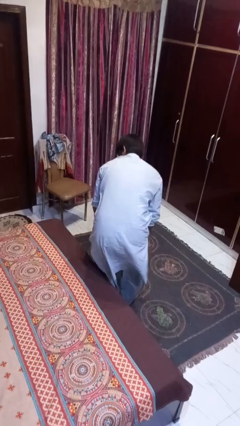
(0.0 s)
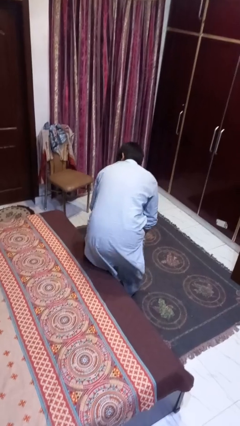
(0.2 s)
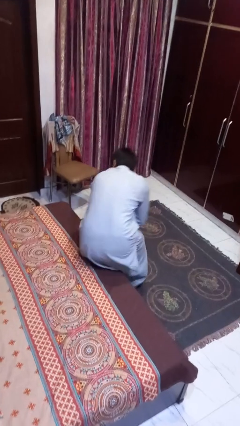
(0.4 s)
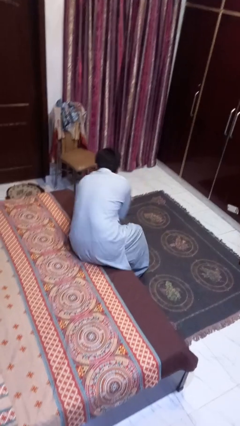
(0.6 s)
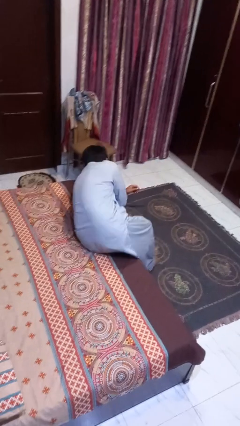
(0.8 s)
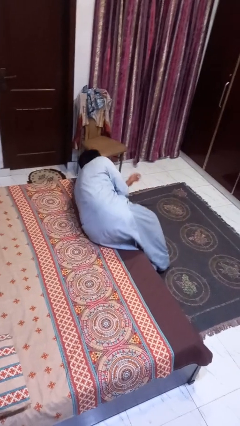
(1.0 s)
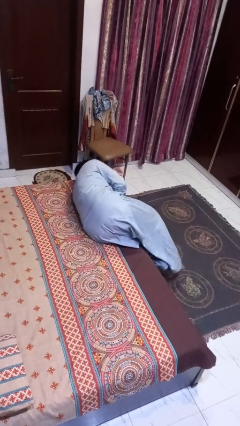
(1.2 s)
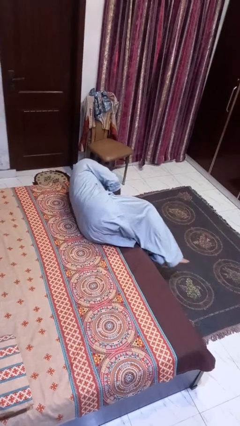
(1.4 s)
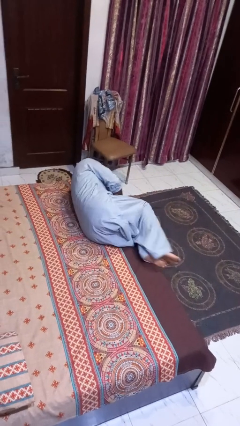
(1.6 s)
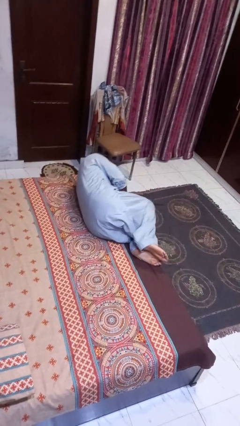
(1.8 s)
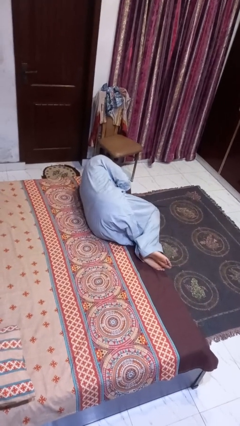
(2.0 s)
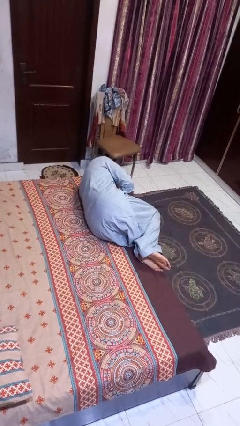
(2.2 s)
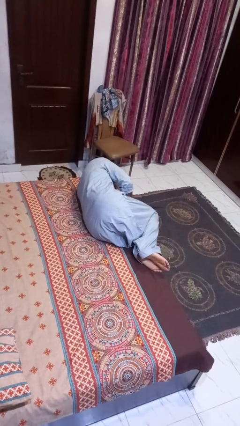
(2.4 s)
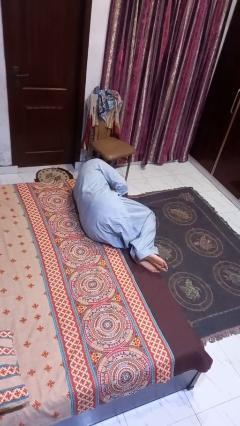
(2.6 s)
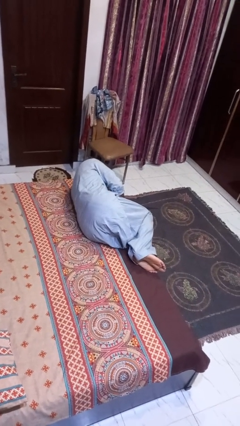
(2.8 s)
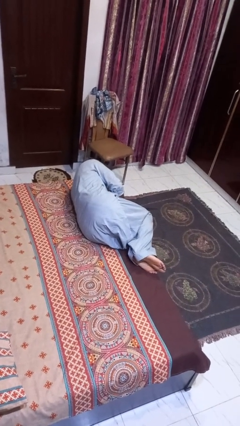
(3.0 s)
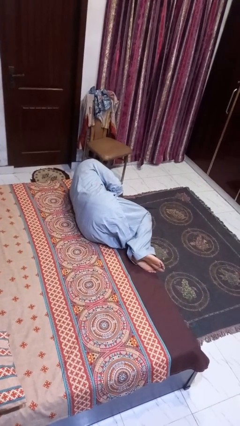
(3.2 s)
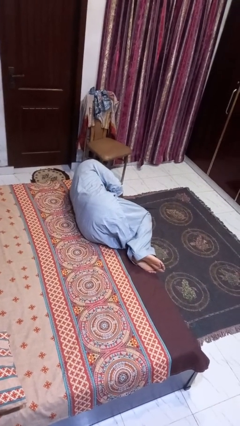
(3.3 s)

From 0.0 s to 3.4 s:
person lies down on bed

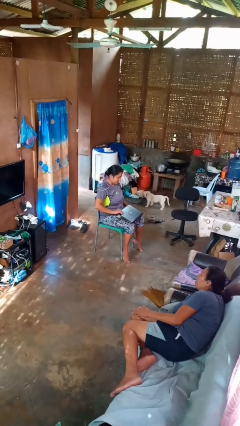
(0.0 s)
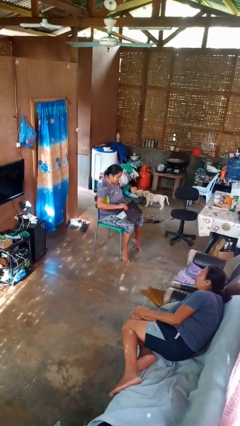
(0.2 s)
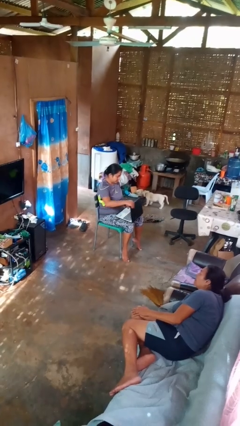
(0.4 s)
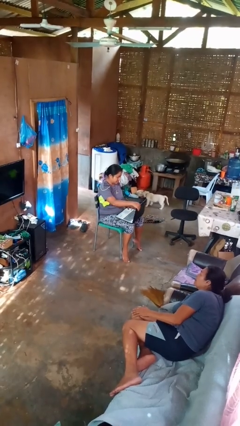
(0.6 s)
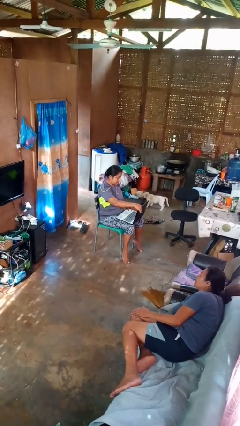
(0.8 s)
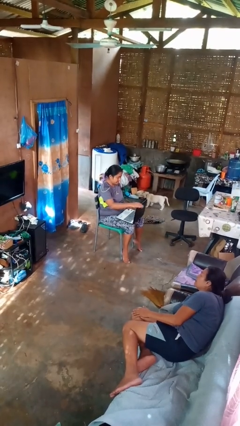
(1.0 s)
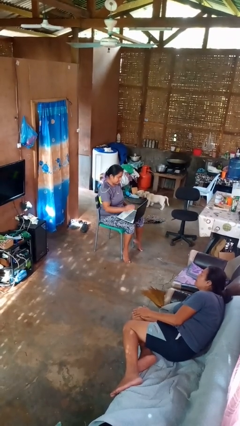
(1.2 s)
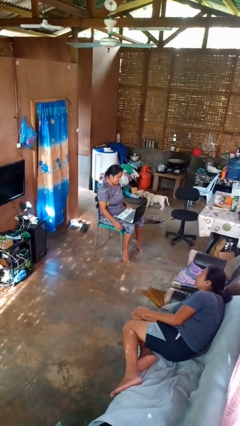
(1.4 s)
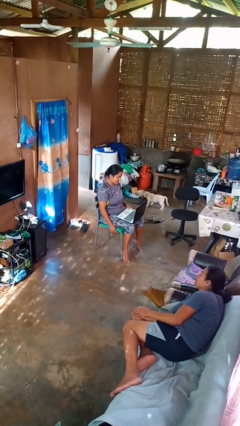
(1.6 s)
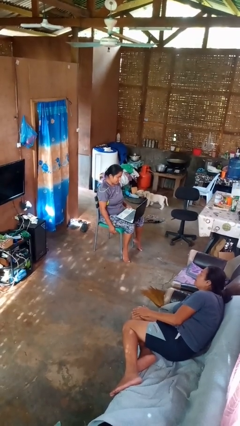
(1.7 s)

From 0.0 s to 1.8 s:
person opens laptop

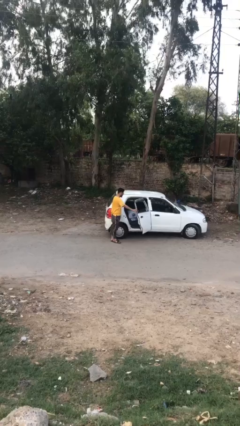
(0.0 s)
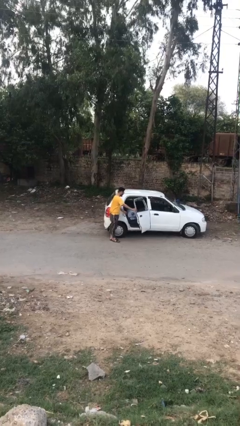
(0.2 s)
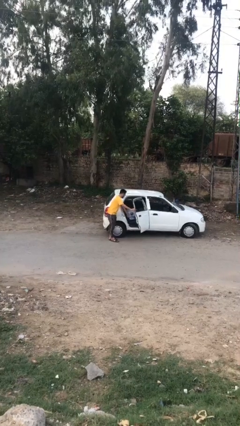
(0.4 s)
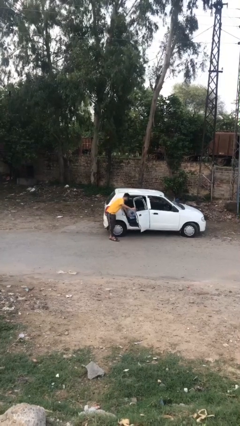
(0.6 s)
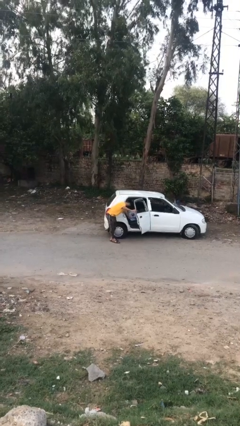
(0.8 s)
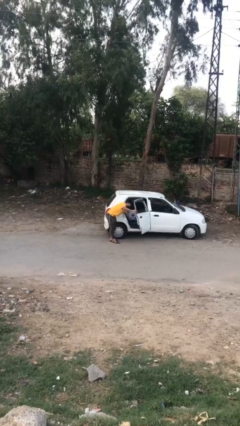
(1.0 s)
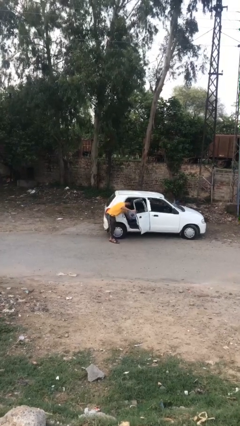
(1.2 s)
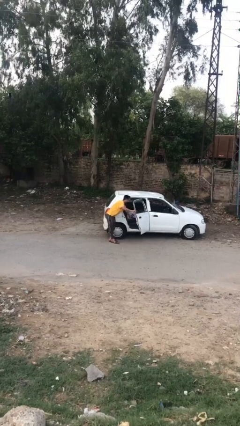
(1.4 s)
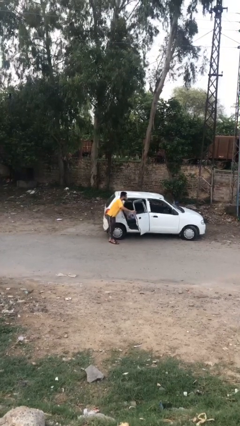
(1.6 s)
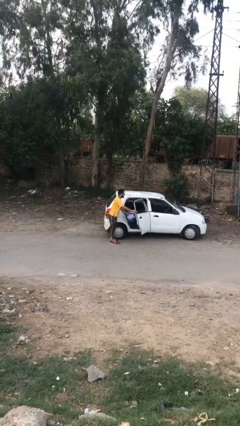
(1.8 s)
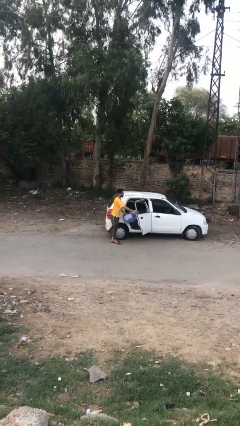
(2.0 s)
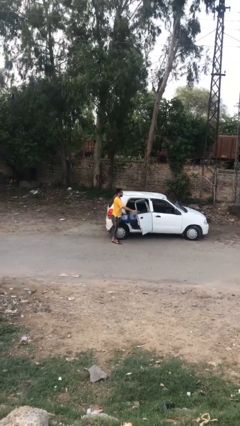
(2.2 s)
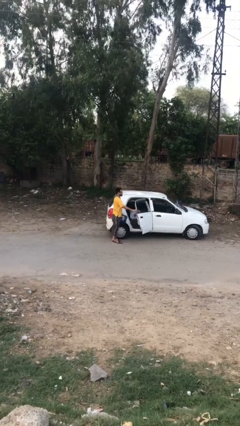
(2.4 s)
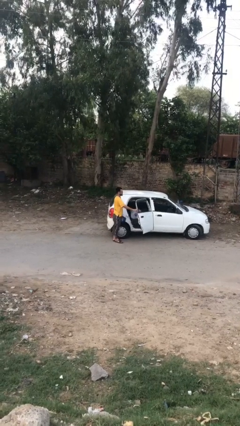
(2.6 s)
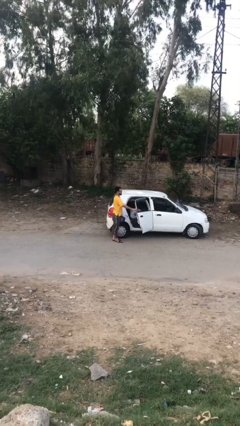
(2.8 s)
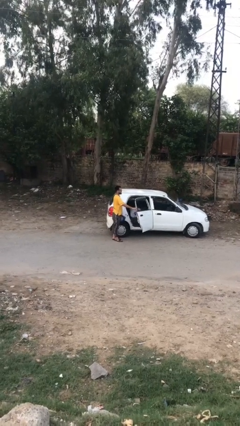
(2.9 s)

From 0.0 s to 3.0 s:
person unloads car

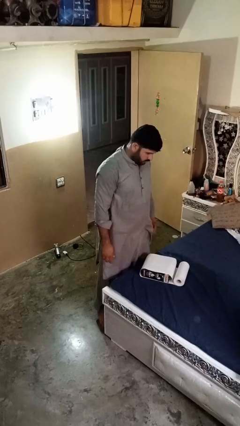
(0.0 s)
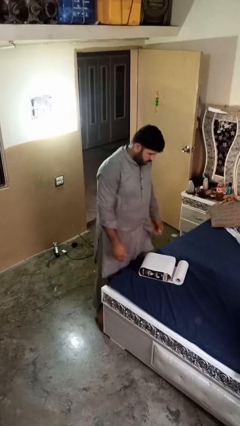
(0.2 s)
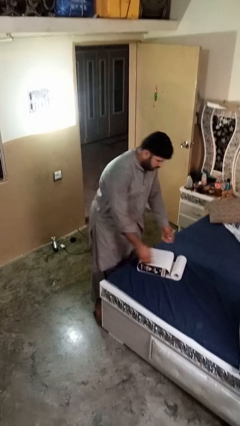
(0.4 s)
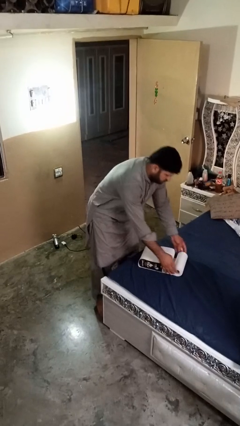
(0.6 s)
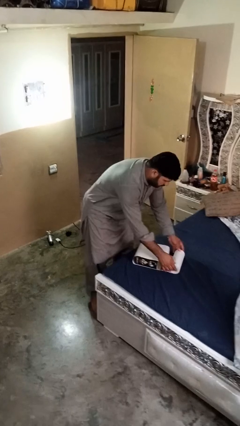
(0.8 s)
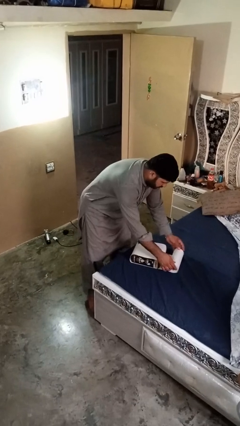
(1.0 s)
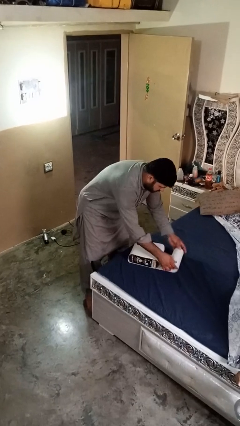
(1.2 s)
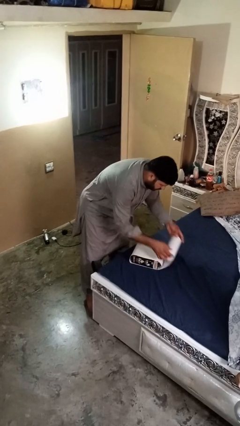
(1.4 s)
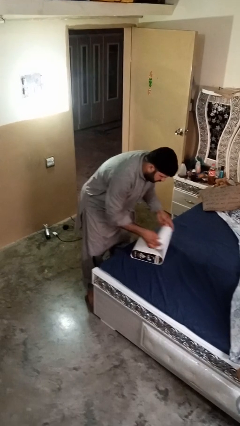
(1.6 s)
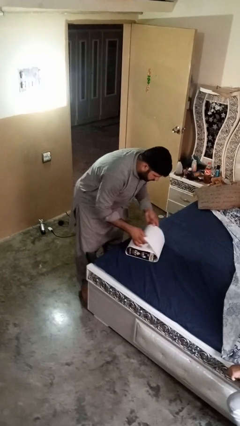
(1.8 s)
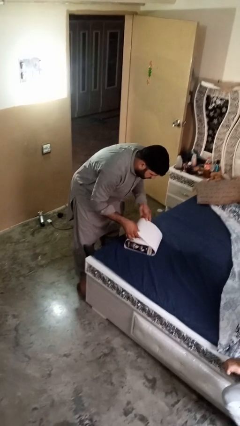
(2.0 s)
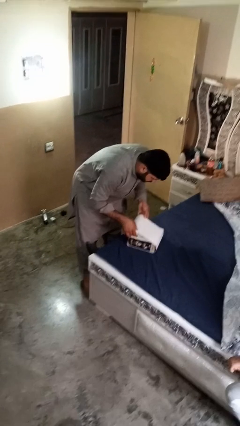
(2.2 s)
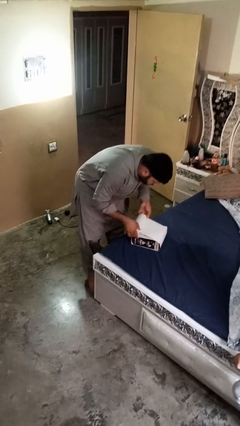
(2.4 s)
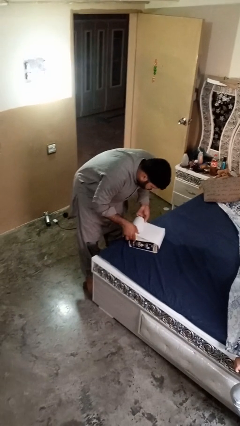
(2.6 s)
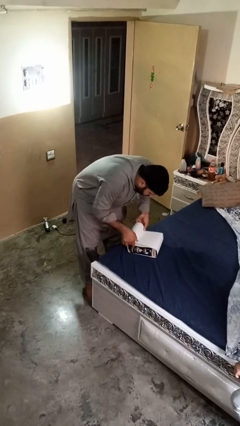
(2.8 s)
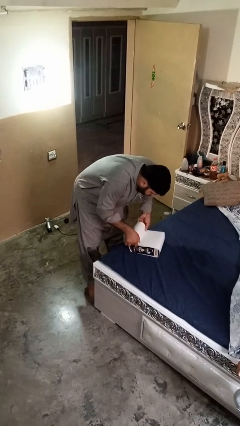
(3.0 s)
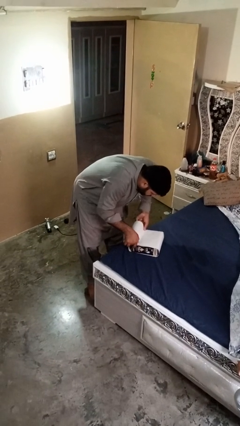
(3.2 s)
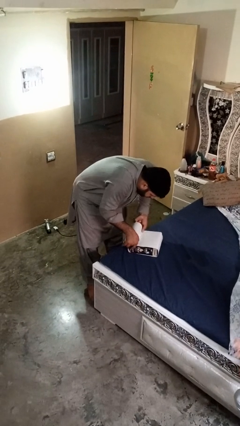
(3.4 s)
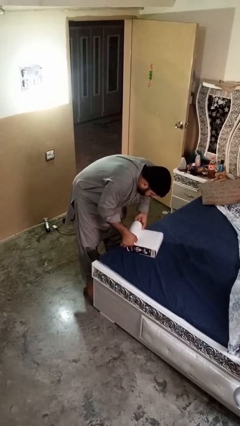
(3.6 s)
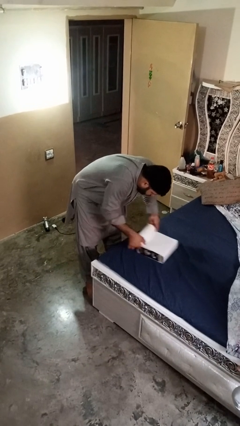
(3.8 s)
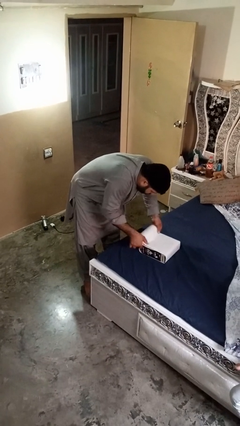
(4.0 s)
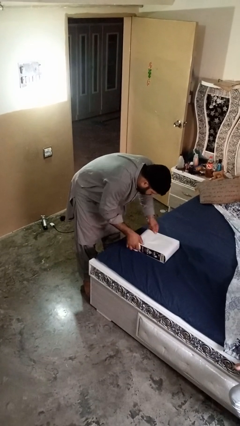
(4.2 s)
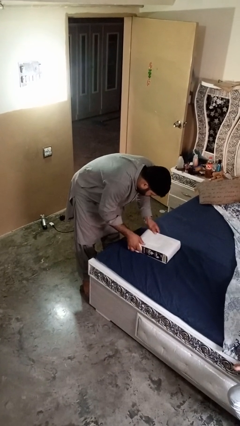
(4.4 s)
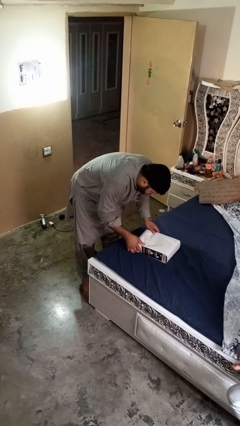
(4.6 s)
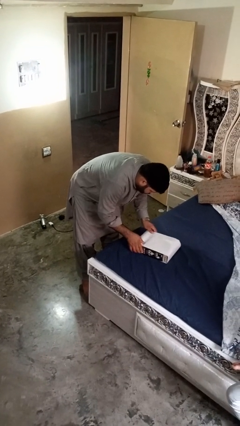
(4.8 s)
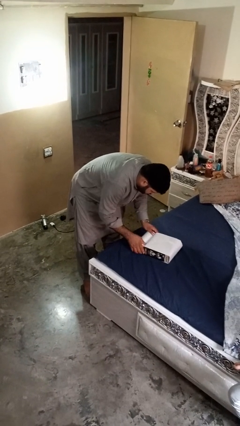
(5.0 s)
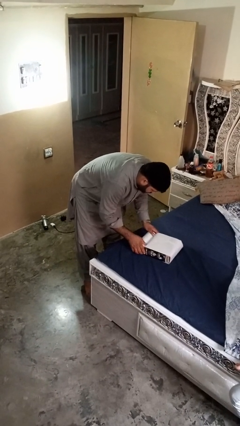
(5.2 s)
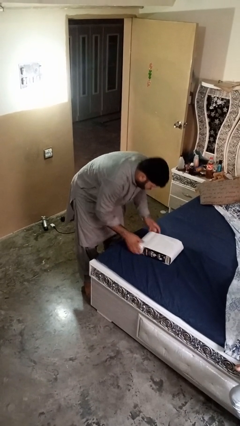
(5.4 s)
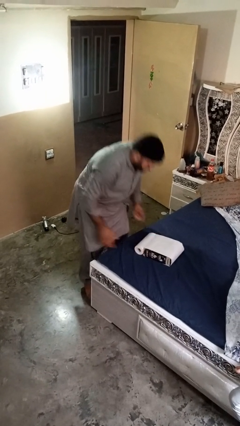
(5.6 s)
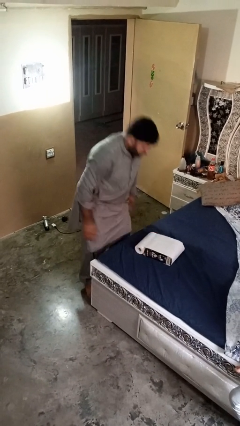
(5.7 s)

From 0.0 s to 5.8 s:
person wraps box

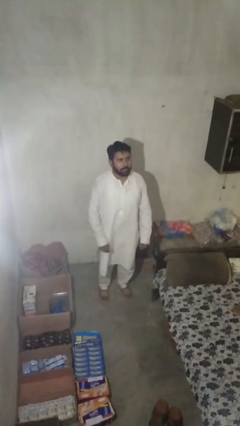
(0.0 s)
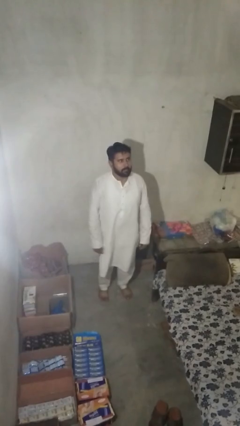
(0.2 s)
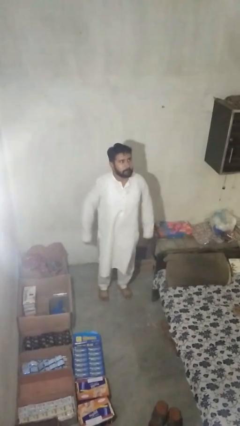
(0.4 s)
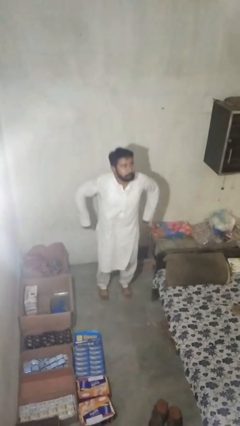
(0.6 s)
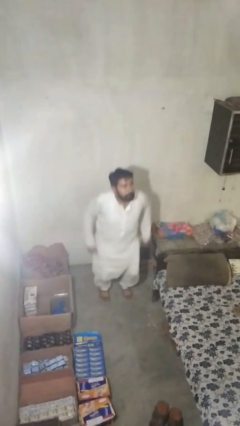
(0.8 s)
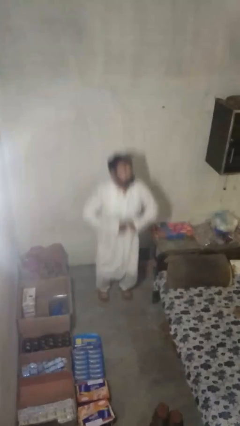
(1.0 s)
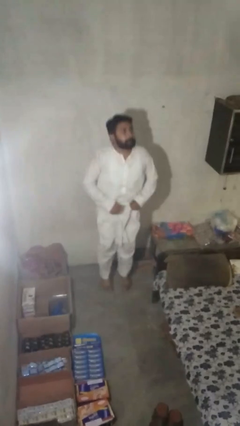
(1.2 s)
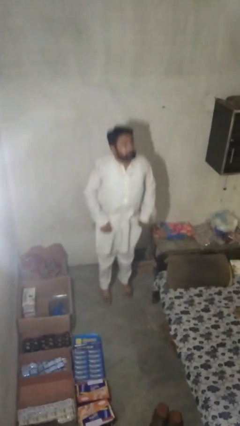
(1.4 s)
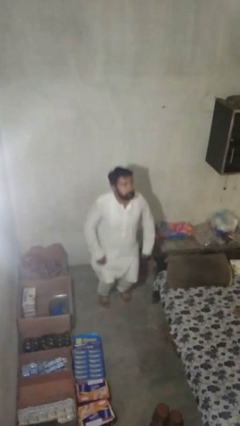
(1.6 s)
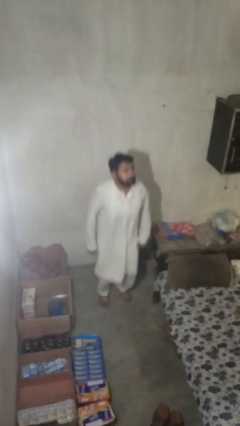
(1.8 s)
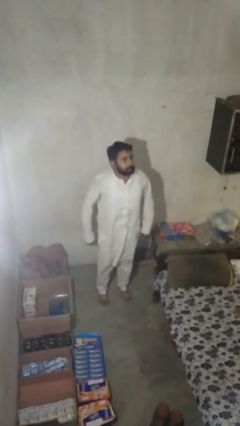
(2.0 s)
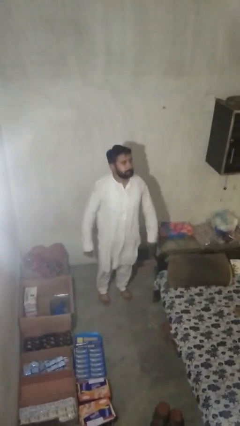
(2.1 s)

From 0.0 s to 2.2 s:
person jumps

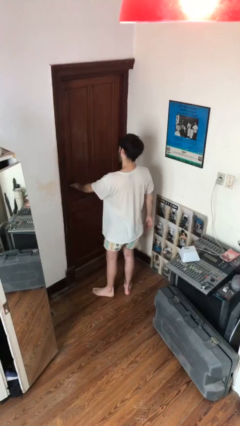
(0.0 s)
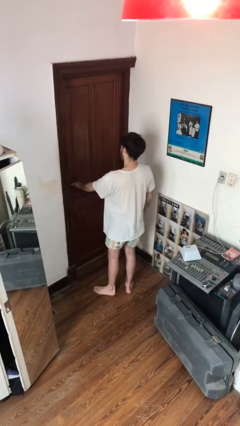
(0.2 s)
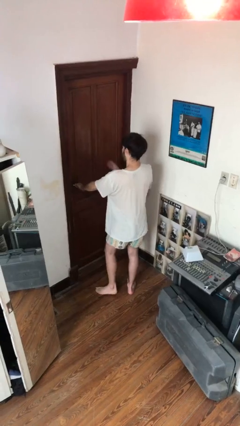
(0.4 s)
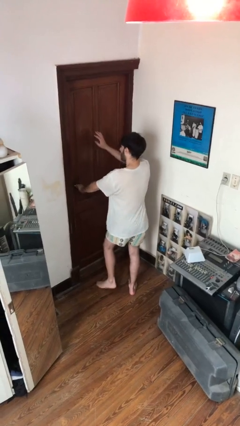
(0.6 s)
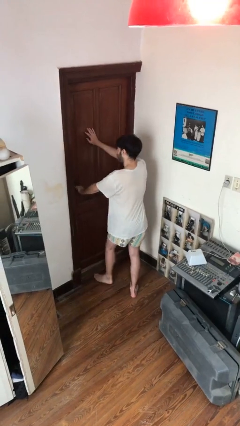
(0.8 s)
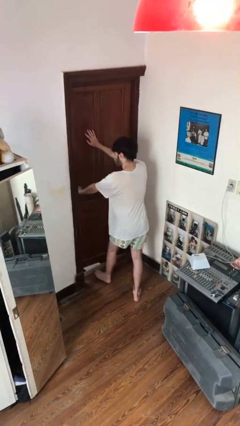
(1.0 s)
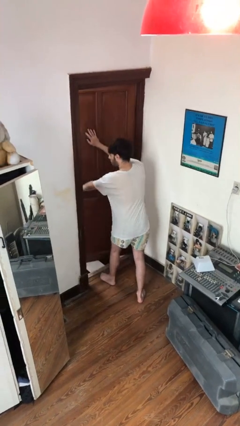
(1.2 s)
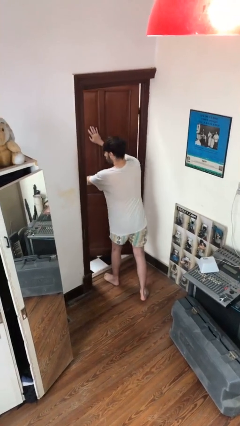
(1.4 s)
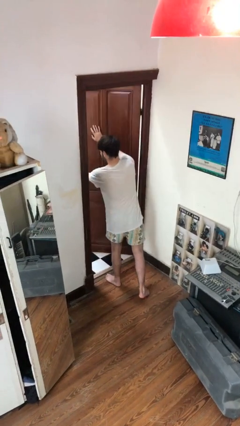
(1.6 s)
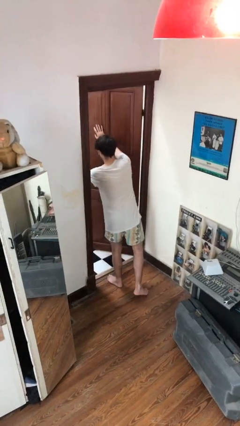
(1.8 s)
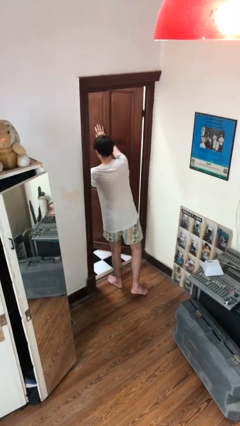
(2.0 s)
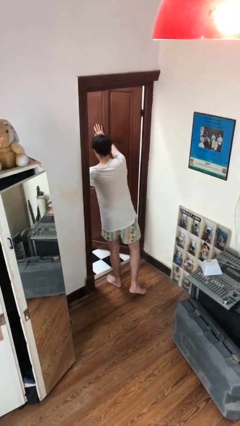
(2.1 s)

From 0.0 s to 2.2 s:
person opens facility door
